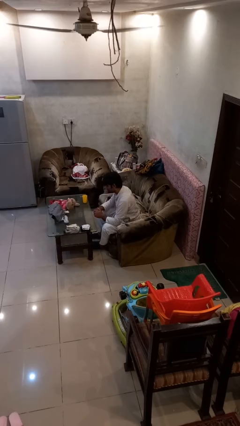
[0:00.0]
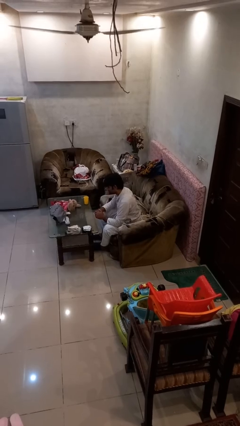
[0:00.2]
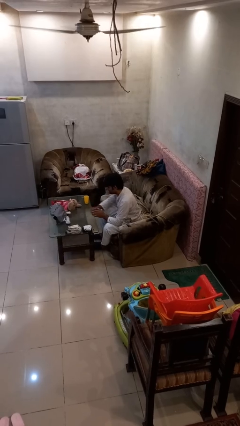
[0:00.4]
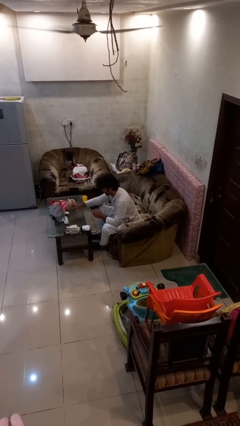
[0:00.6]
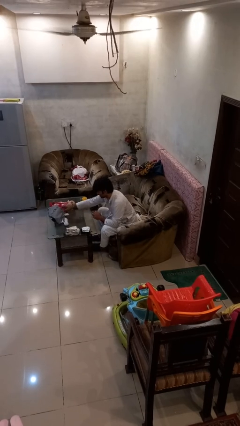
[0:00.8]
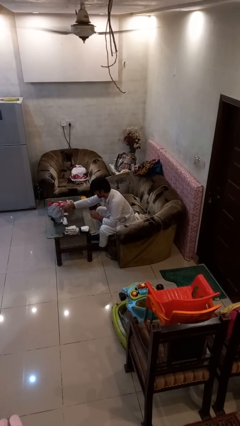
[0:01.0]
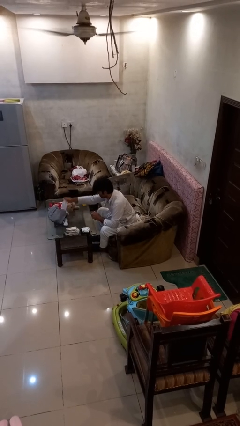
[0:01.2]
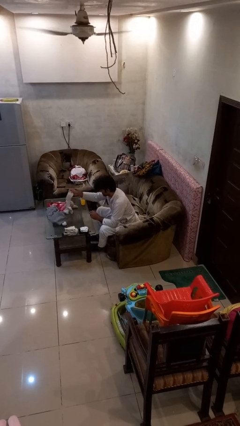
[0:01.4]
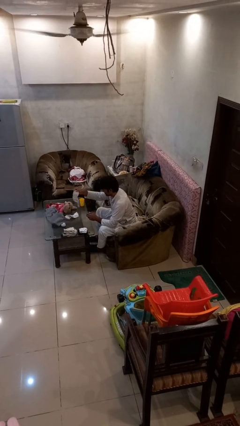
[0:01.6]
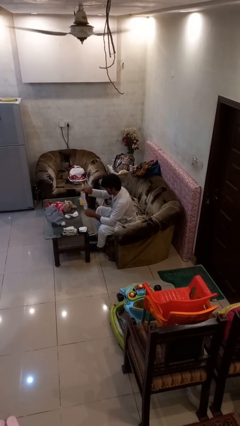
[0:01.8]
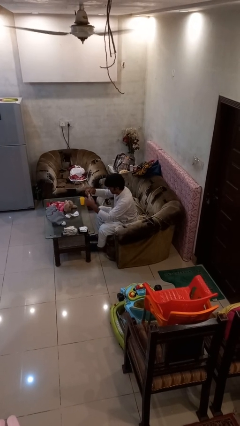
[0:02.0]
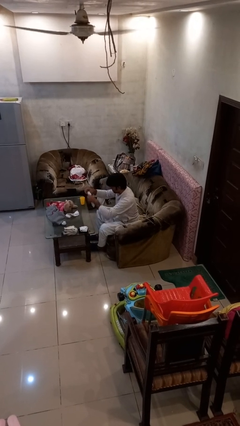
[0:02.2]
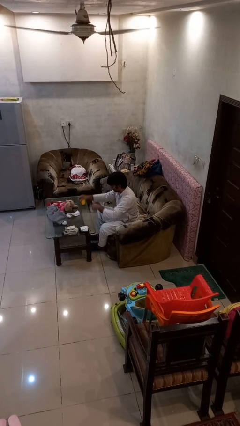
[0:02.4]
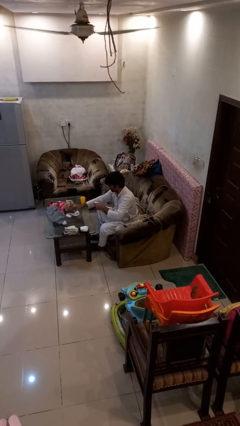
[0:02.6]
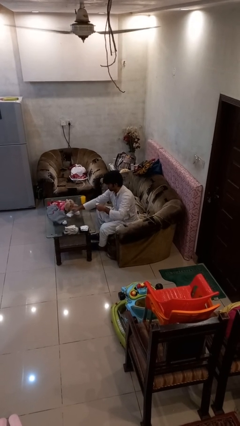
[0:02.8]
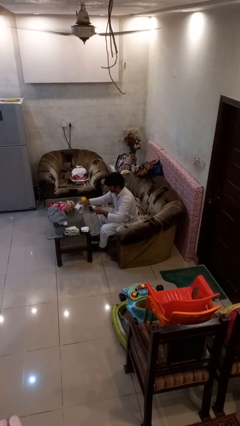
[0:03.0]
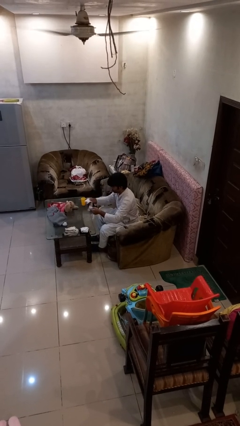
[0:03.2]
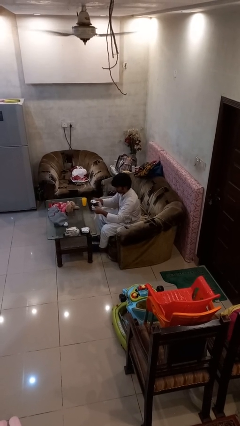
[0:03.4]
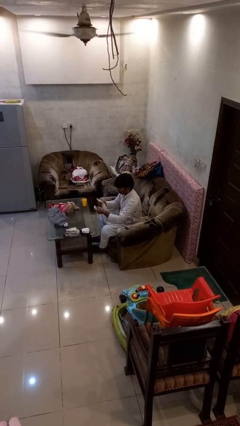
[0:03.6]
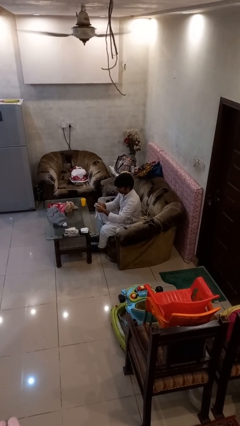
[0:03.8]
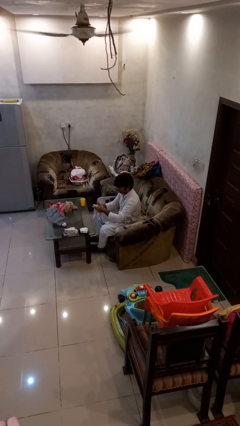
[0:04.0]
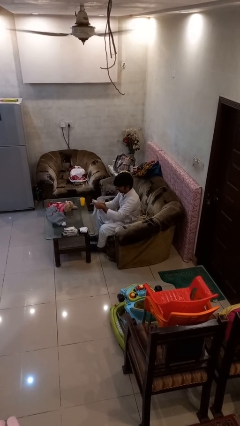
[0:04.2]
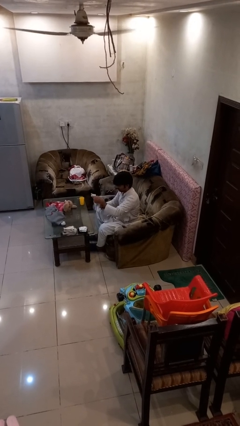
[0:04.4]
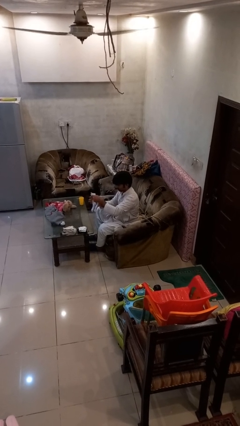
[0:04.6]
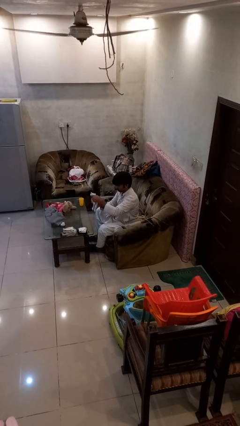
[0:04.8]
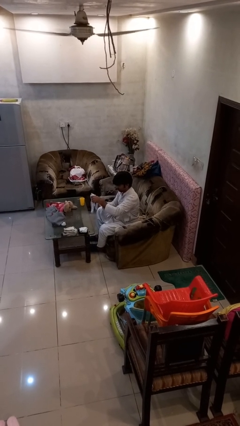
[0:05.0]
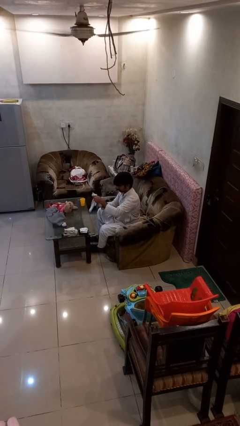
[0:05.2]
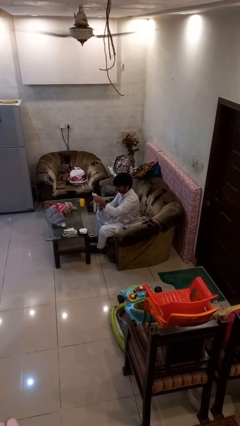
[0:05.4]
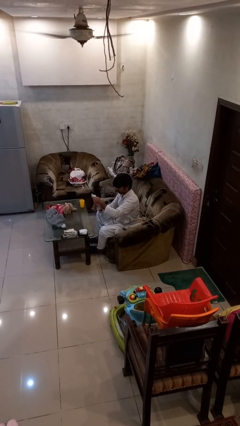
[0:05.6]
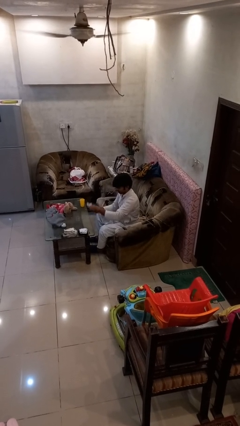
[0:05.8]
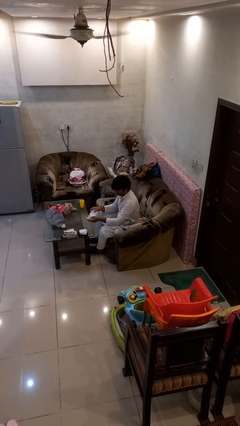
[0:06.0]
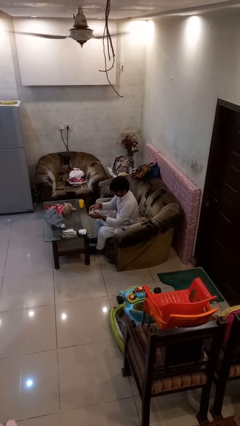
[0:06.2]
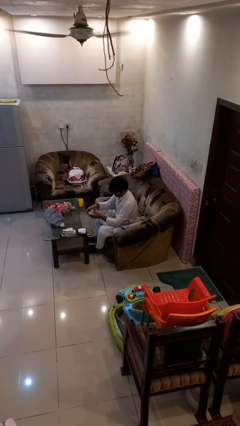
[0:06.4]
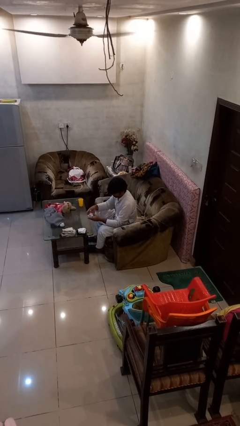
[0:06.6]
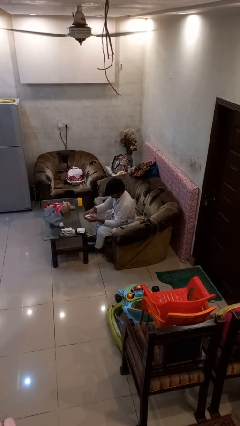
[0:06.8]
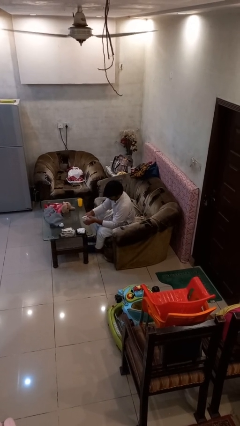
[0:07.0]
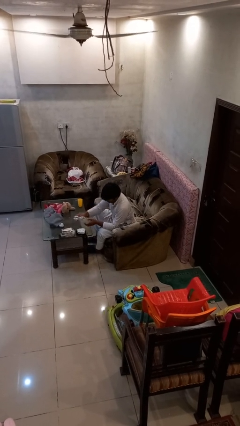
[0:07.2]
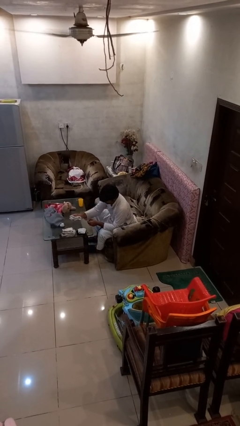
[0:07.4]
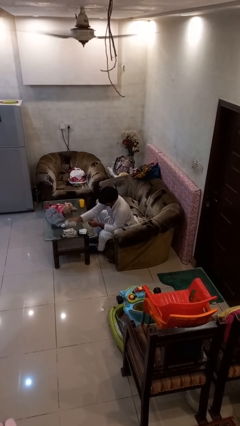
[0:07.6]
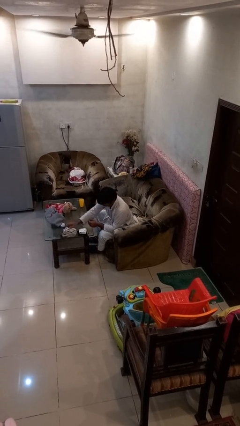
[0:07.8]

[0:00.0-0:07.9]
person folds socks

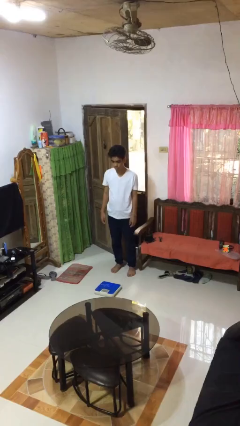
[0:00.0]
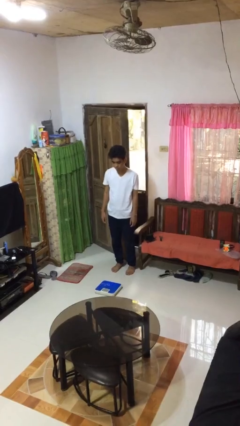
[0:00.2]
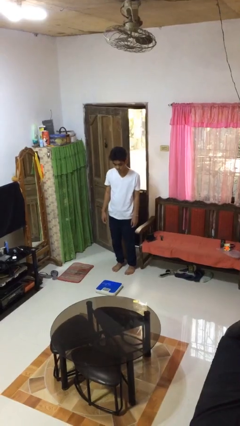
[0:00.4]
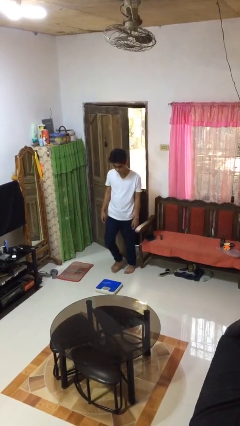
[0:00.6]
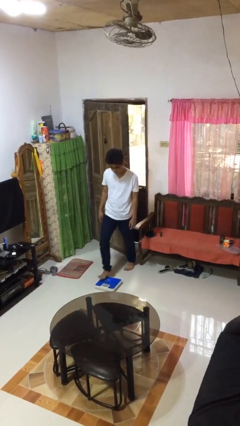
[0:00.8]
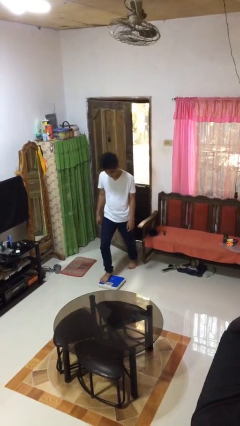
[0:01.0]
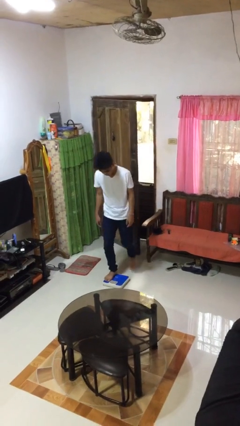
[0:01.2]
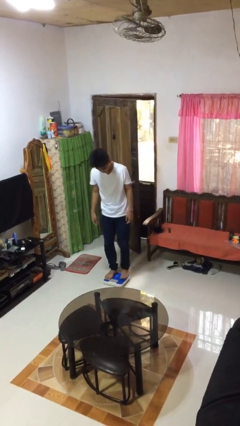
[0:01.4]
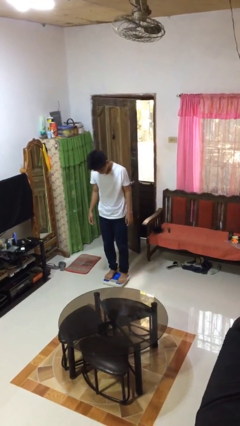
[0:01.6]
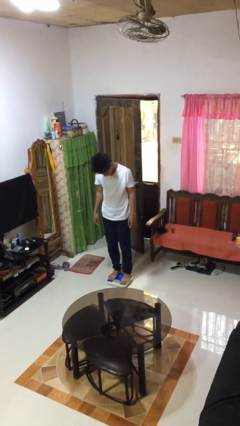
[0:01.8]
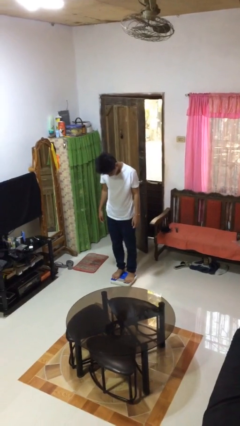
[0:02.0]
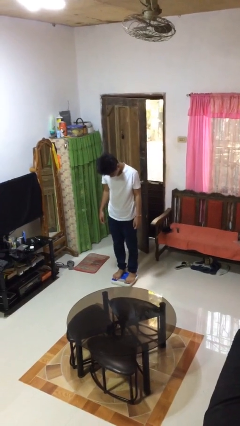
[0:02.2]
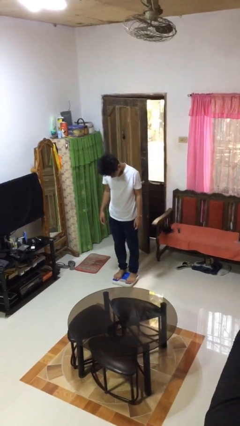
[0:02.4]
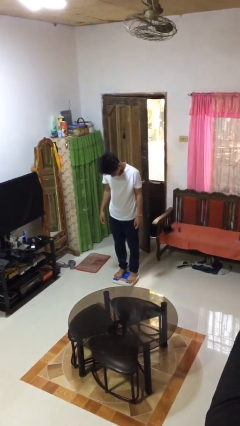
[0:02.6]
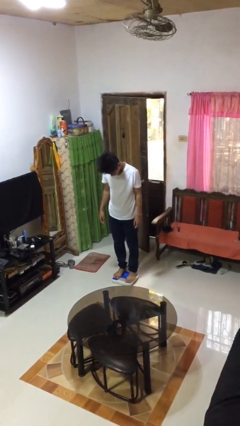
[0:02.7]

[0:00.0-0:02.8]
person uses bodyweight scale

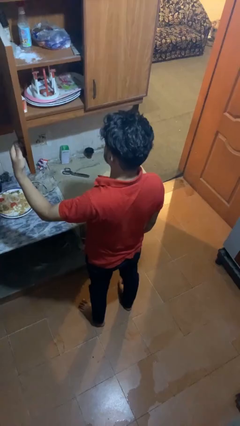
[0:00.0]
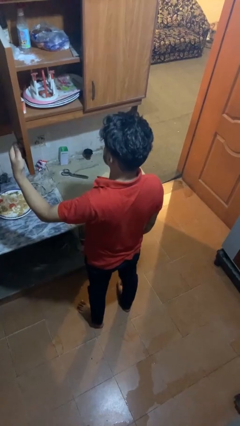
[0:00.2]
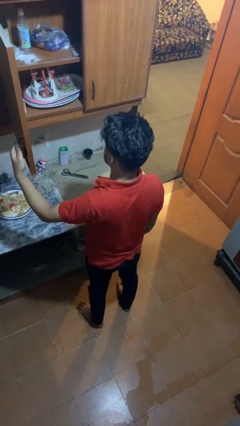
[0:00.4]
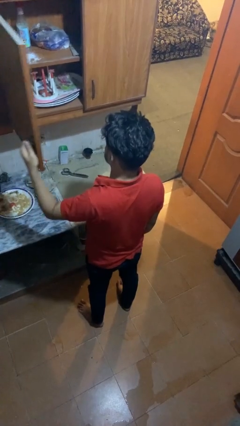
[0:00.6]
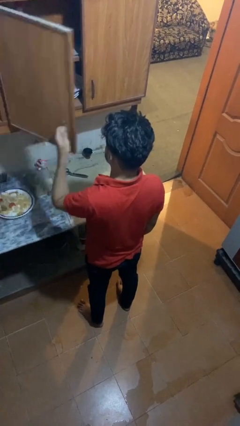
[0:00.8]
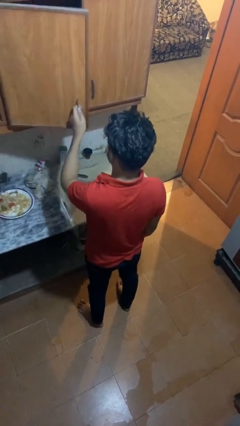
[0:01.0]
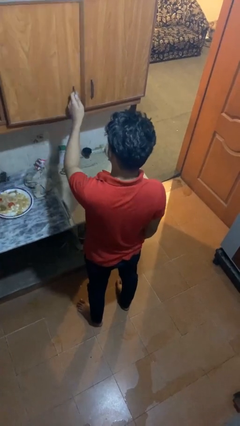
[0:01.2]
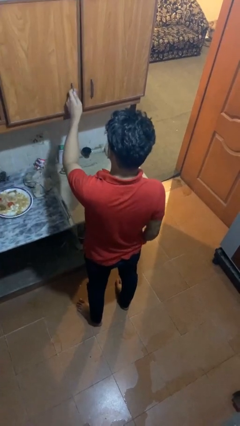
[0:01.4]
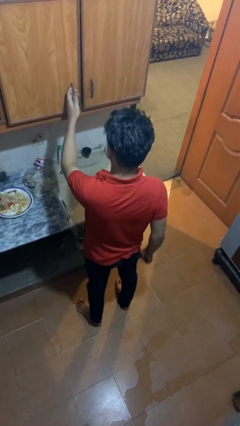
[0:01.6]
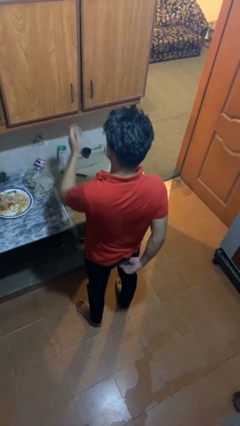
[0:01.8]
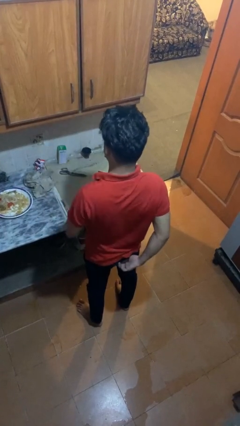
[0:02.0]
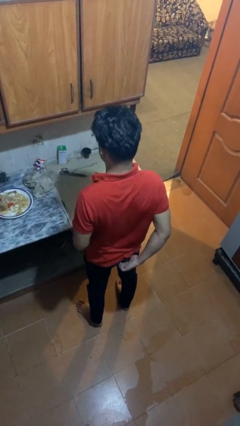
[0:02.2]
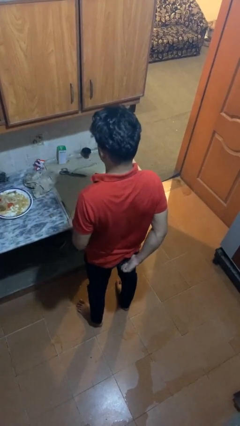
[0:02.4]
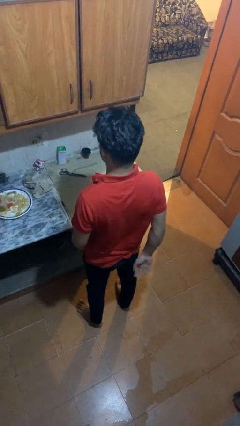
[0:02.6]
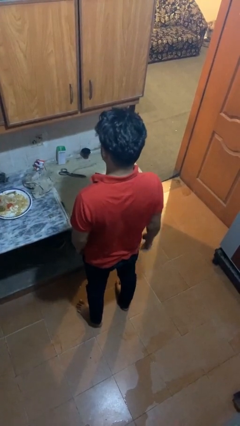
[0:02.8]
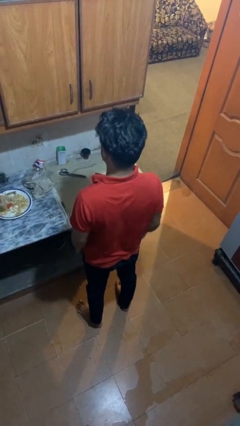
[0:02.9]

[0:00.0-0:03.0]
person closes cabinet

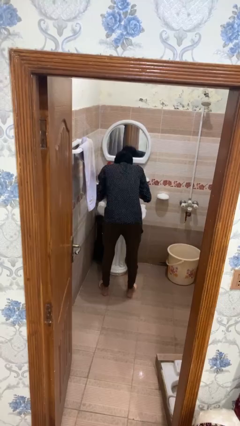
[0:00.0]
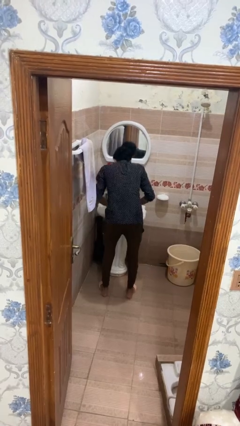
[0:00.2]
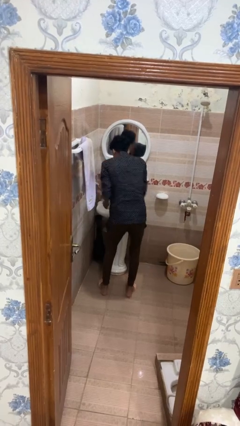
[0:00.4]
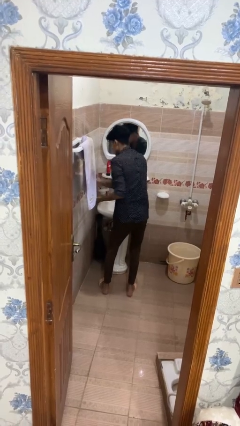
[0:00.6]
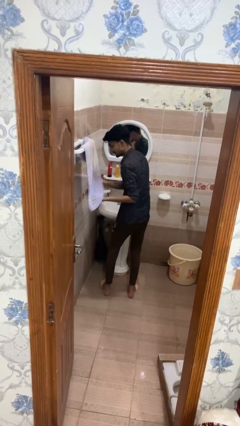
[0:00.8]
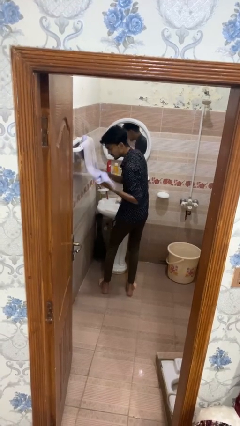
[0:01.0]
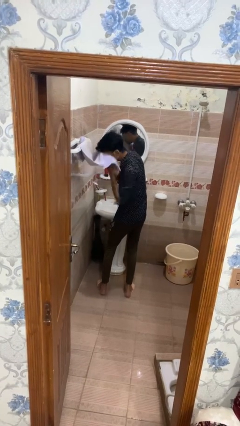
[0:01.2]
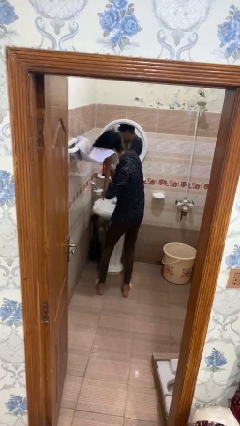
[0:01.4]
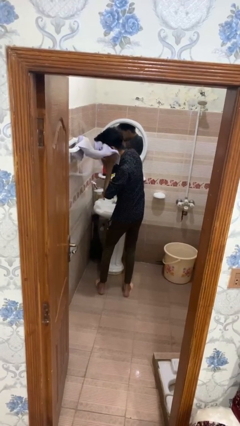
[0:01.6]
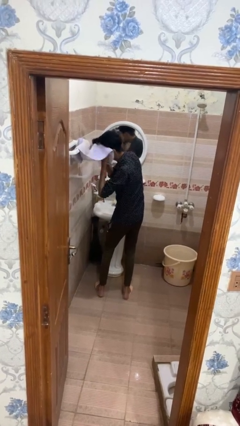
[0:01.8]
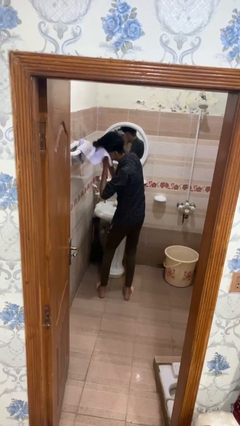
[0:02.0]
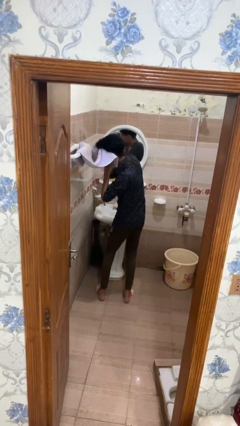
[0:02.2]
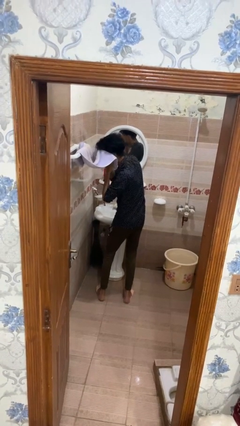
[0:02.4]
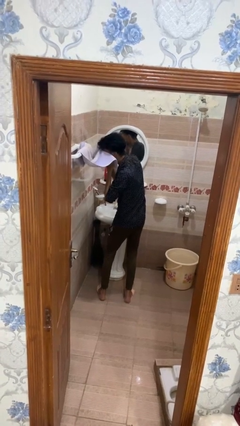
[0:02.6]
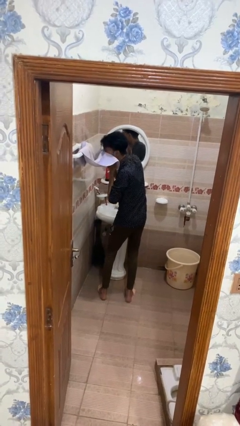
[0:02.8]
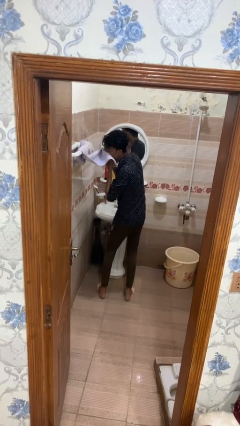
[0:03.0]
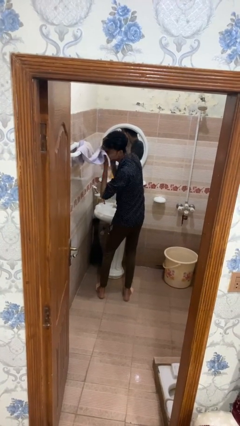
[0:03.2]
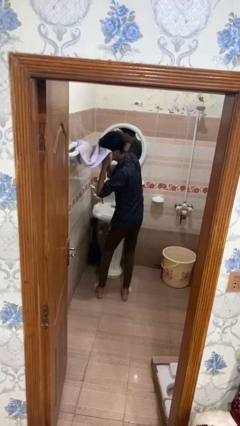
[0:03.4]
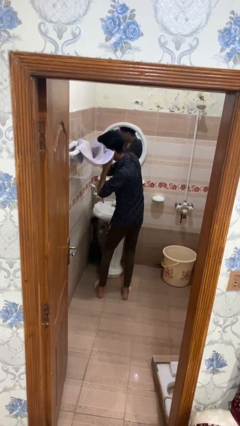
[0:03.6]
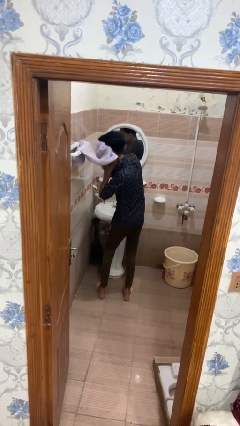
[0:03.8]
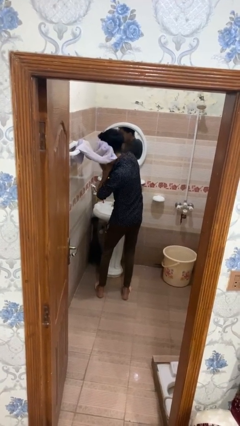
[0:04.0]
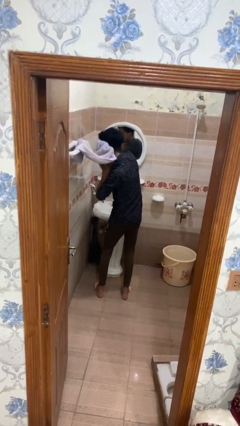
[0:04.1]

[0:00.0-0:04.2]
person dries face with towel

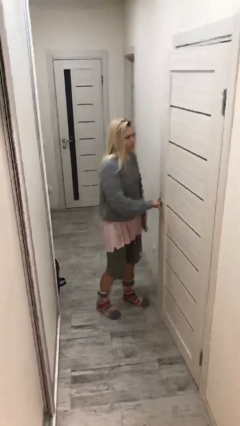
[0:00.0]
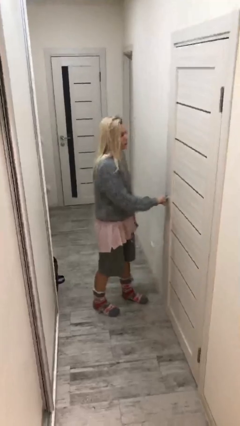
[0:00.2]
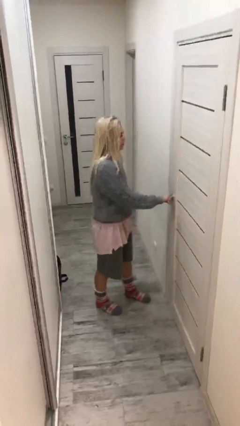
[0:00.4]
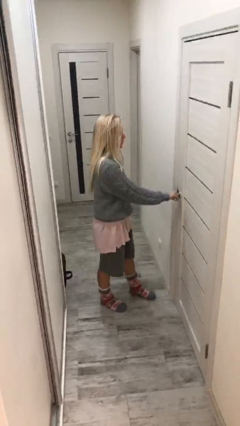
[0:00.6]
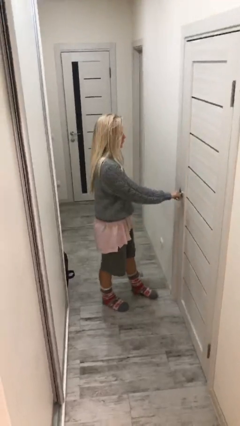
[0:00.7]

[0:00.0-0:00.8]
person closes facility door
